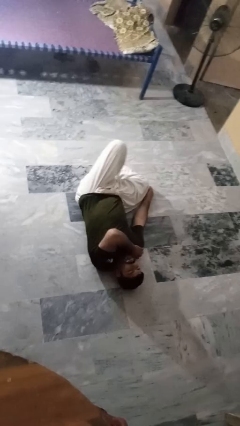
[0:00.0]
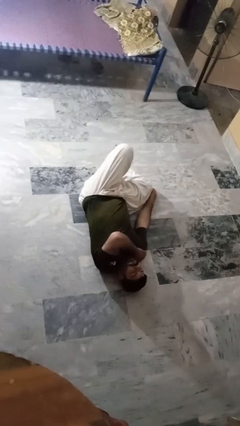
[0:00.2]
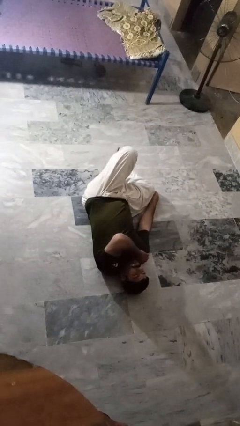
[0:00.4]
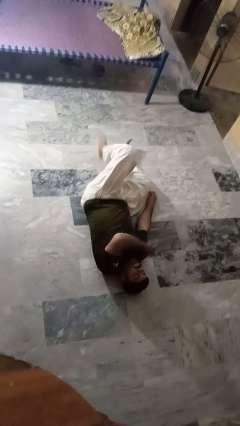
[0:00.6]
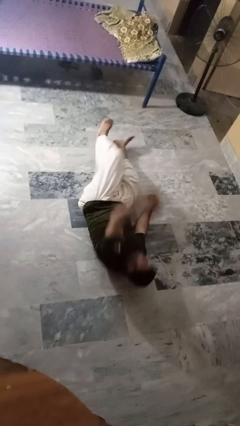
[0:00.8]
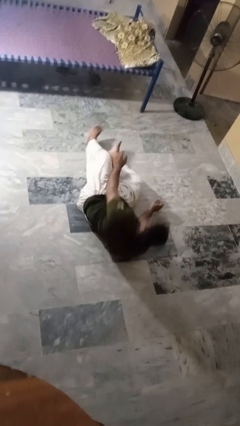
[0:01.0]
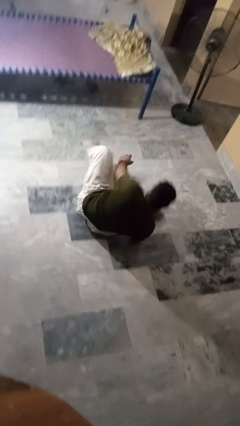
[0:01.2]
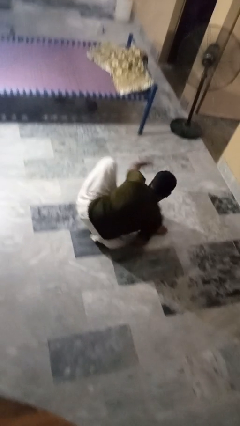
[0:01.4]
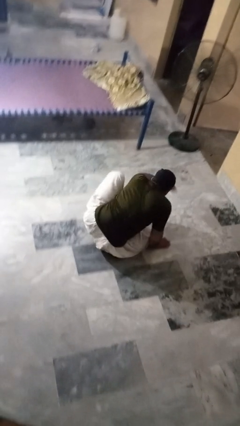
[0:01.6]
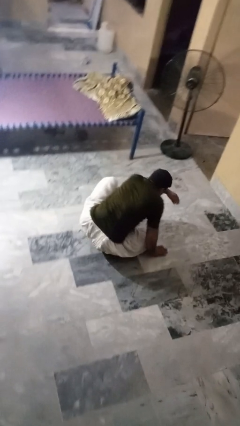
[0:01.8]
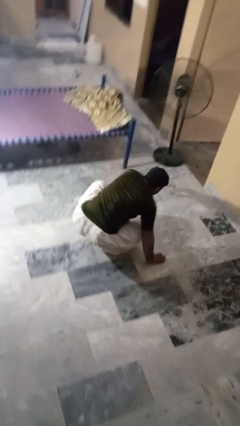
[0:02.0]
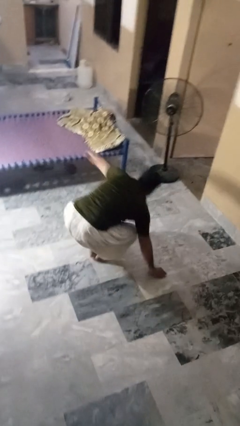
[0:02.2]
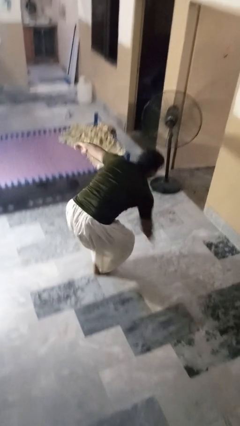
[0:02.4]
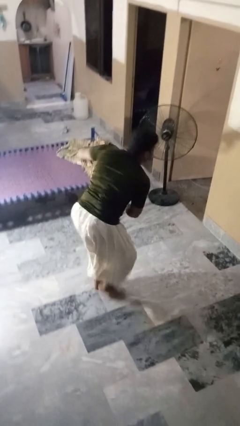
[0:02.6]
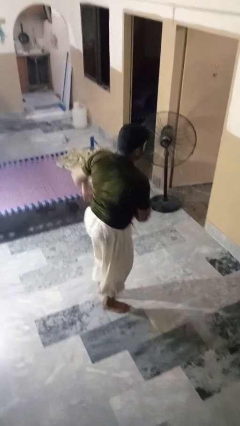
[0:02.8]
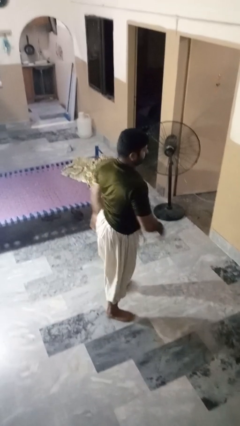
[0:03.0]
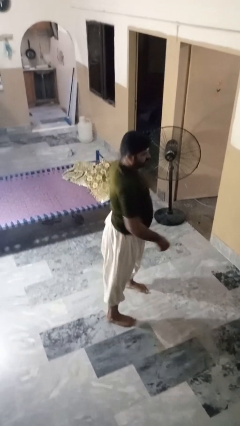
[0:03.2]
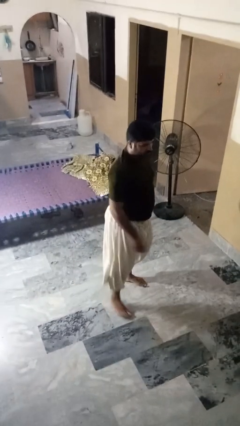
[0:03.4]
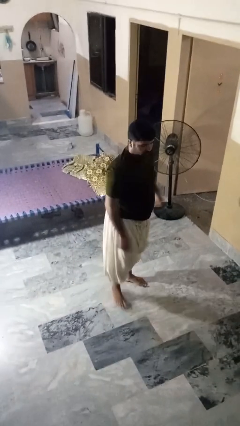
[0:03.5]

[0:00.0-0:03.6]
person stands up from floor

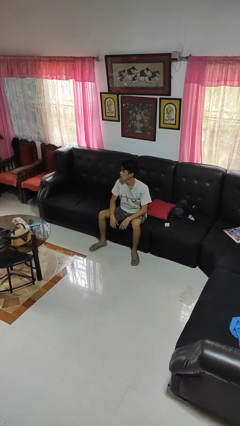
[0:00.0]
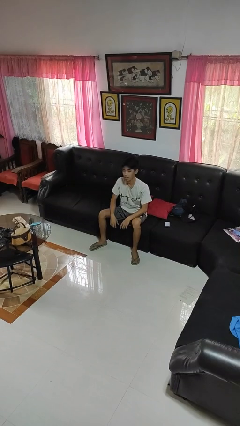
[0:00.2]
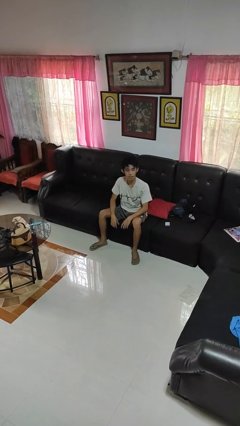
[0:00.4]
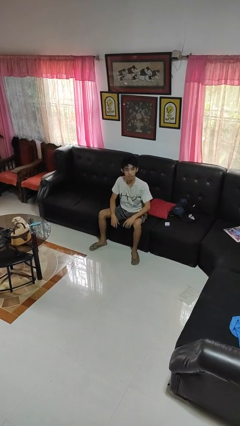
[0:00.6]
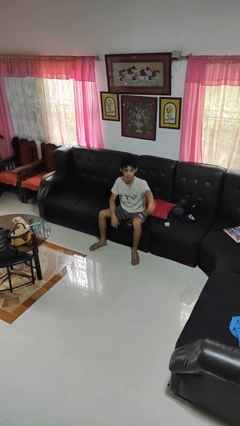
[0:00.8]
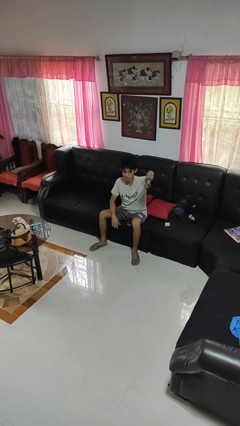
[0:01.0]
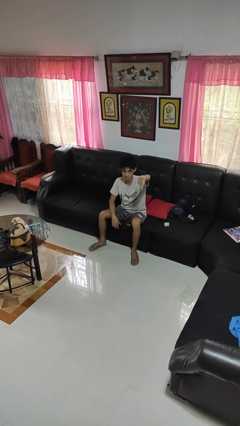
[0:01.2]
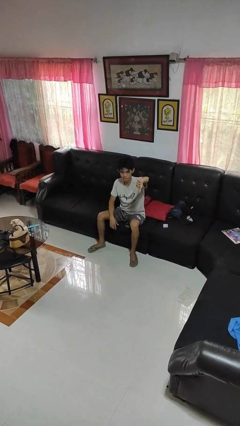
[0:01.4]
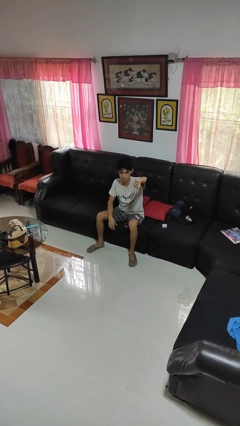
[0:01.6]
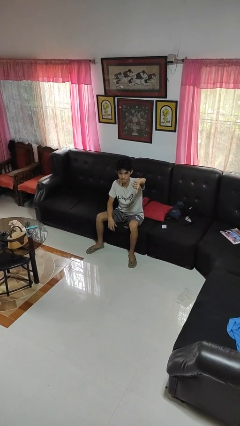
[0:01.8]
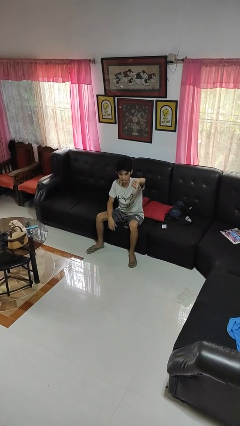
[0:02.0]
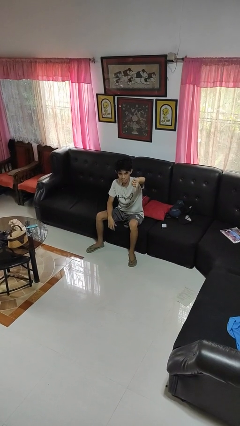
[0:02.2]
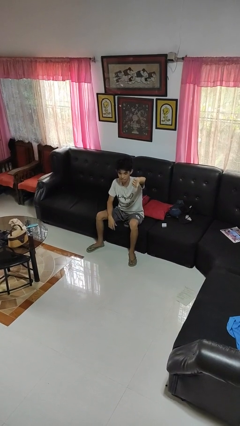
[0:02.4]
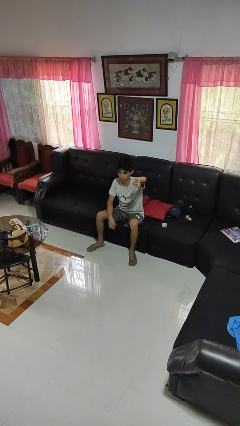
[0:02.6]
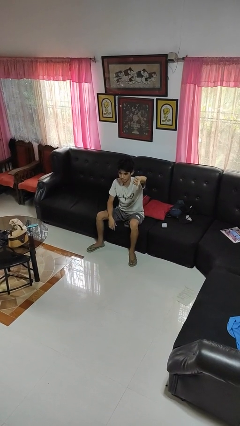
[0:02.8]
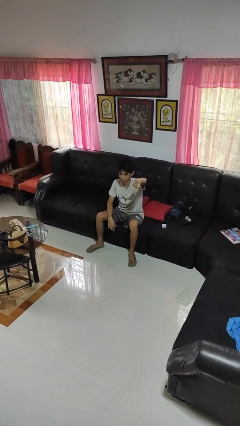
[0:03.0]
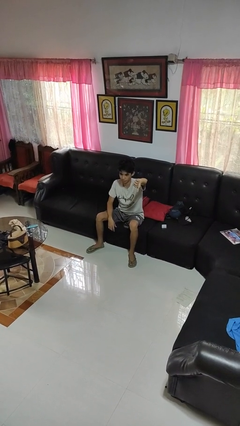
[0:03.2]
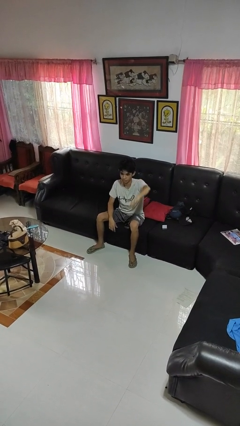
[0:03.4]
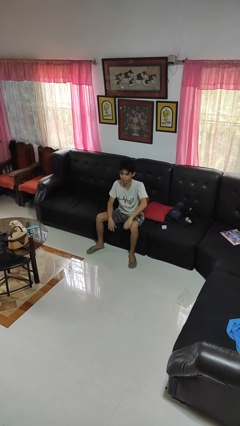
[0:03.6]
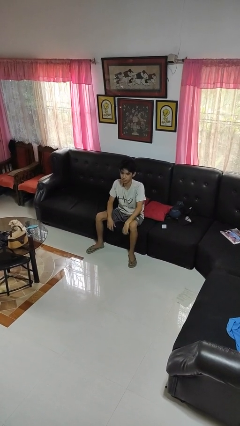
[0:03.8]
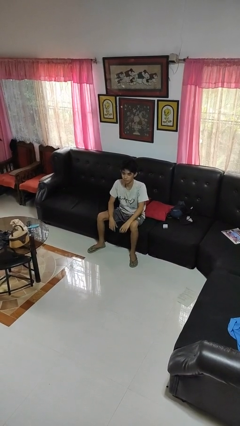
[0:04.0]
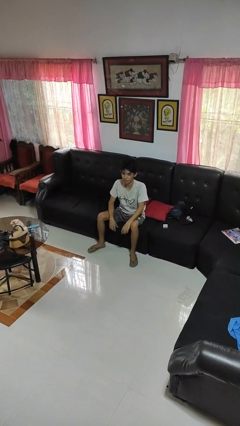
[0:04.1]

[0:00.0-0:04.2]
person gestures thumbs down

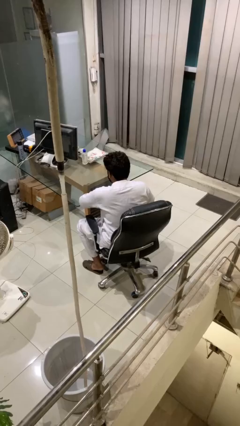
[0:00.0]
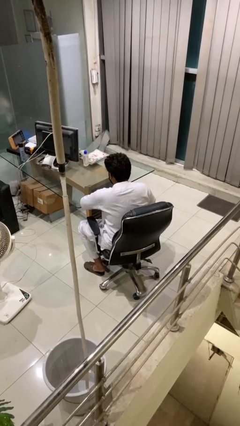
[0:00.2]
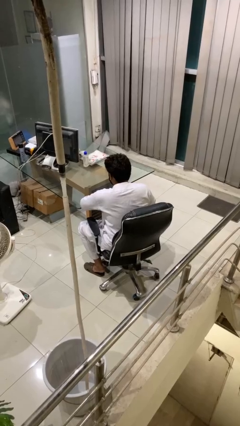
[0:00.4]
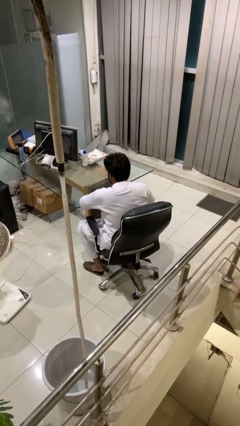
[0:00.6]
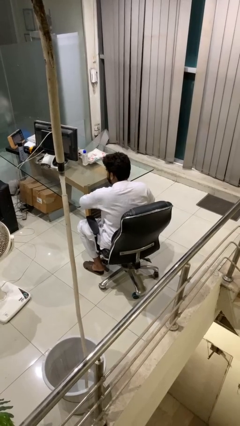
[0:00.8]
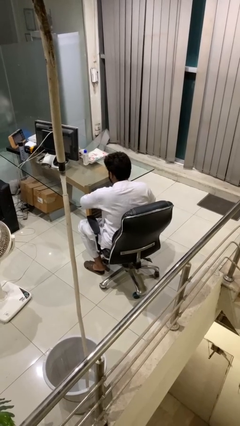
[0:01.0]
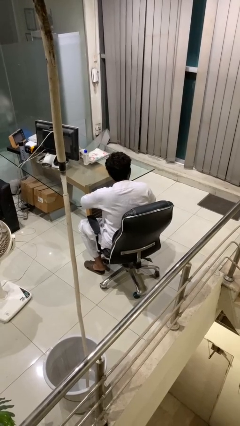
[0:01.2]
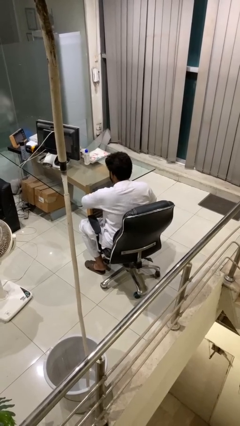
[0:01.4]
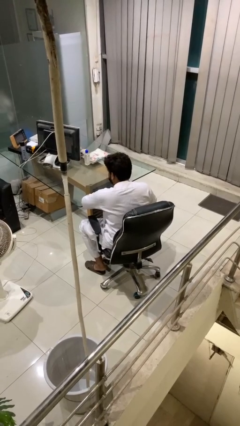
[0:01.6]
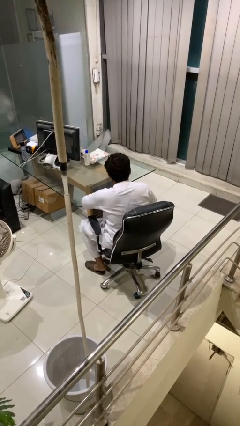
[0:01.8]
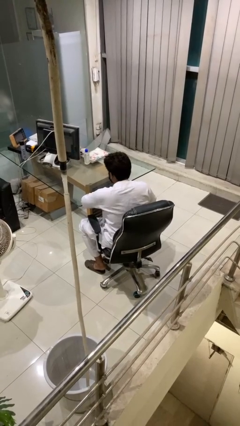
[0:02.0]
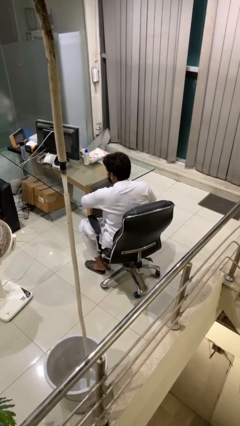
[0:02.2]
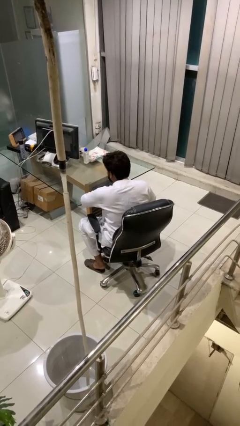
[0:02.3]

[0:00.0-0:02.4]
person shakes head

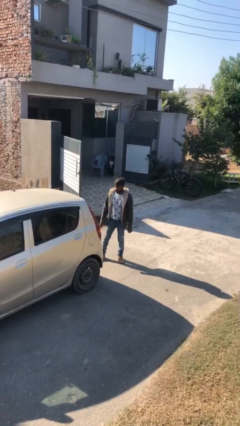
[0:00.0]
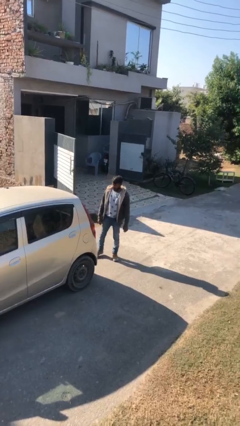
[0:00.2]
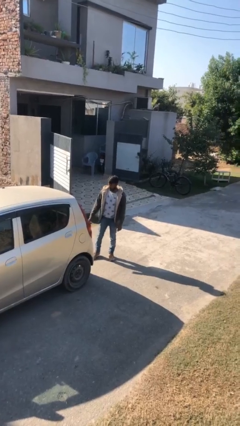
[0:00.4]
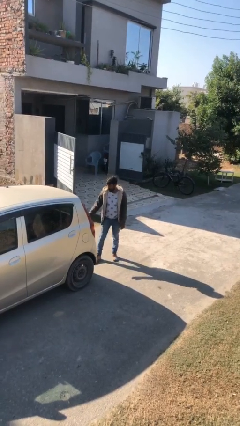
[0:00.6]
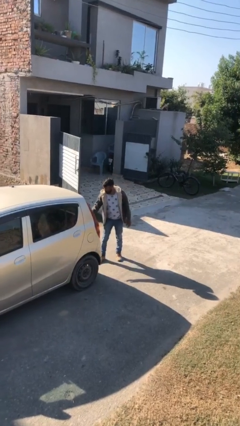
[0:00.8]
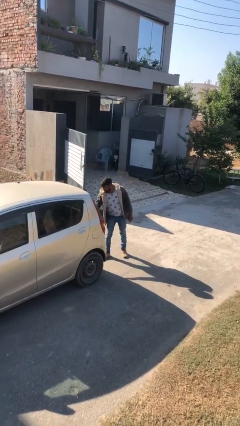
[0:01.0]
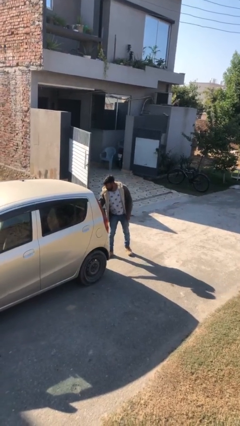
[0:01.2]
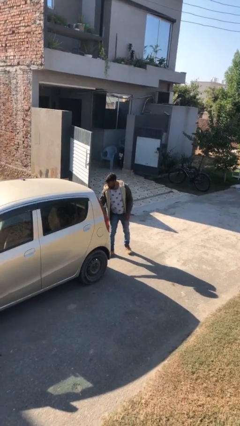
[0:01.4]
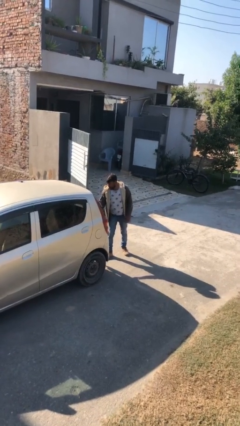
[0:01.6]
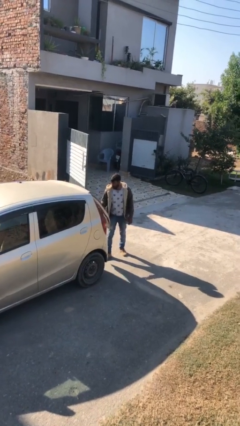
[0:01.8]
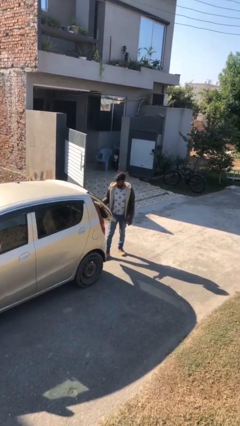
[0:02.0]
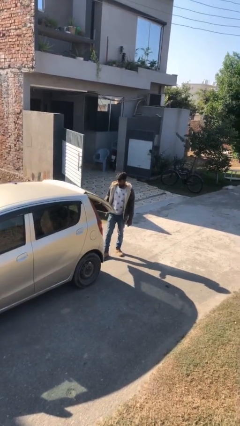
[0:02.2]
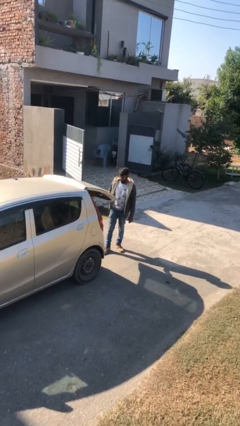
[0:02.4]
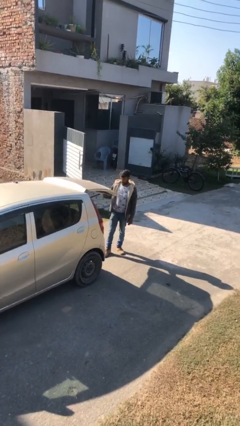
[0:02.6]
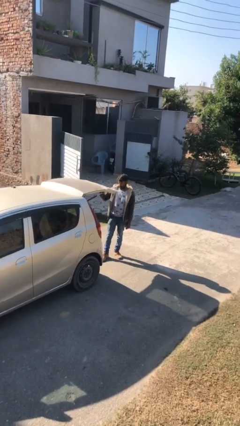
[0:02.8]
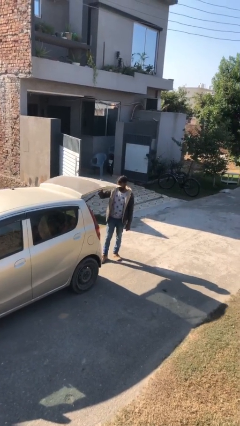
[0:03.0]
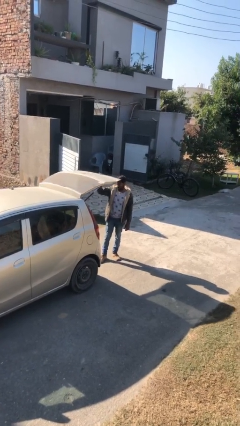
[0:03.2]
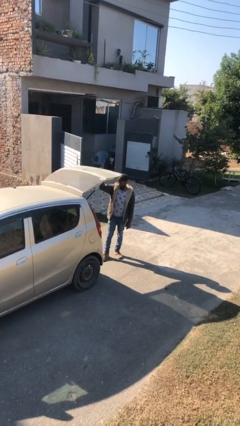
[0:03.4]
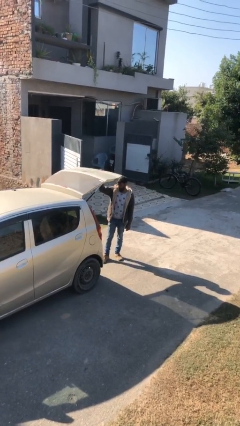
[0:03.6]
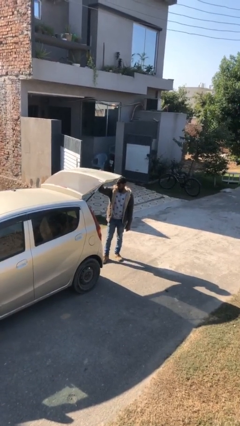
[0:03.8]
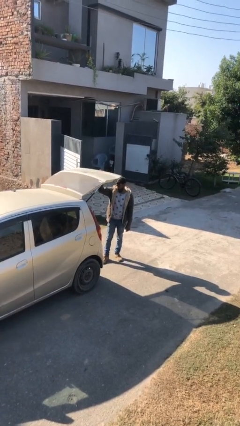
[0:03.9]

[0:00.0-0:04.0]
person opens car trunk

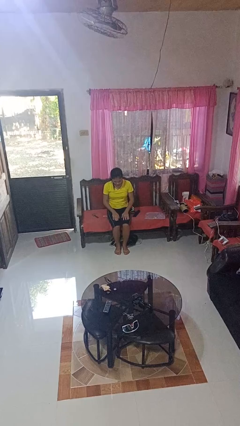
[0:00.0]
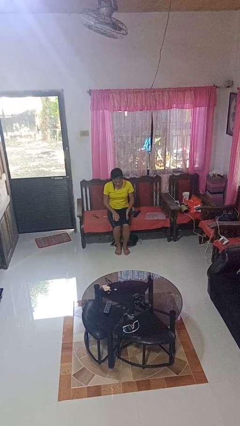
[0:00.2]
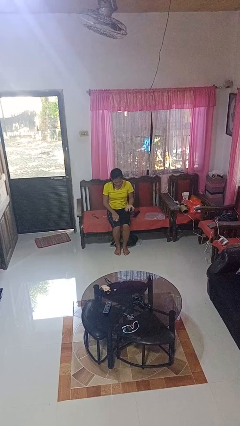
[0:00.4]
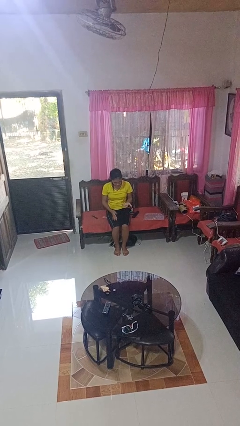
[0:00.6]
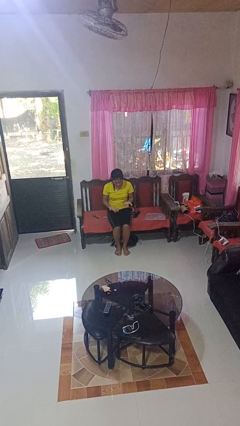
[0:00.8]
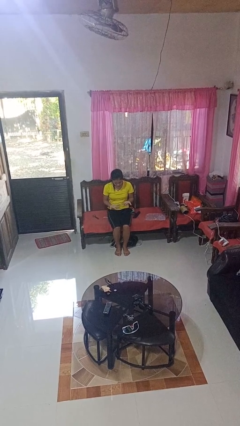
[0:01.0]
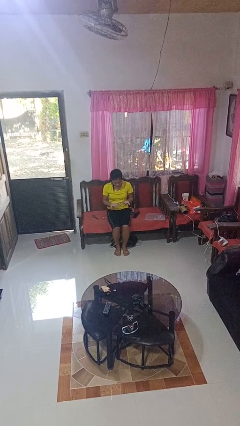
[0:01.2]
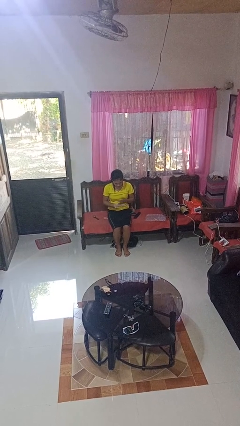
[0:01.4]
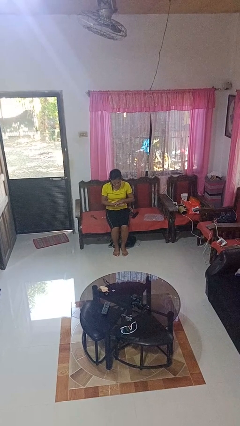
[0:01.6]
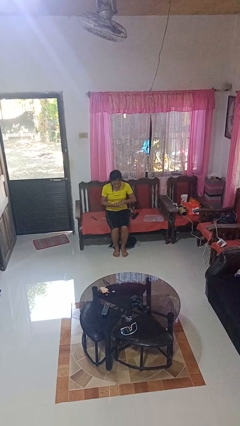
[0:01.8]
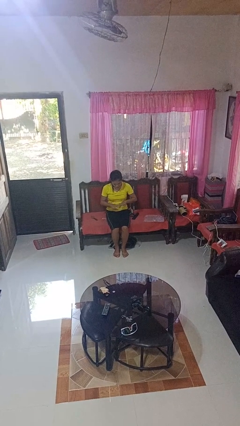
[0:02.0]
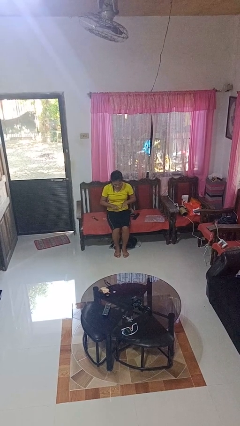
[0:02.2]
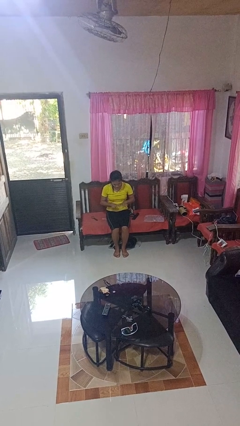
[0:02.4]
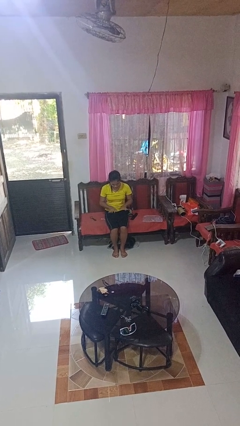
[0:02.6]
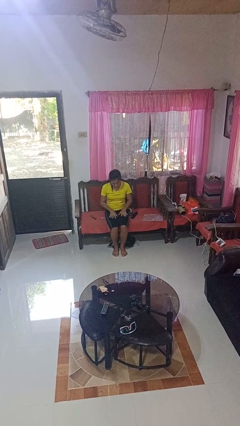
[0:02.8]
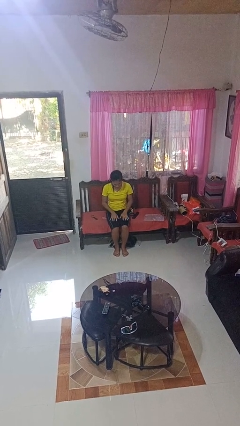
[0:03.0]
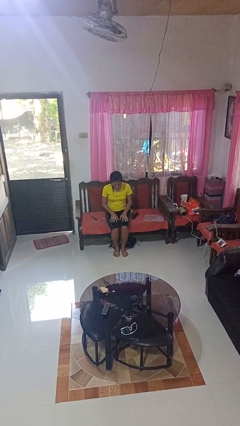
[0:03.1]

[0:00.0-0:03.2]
person looks at hands in lap
